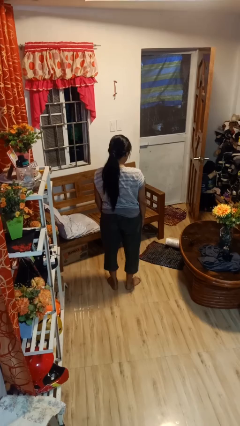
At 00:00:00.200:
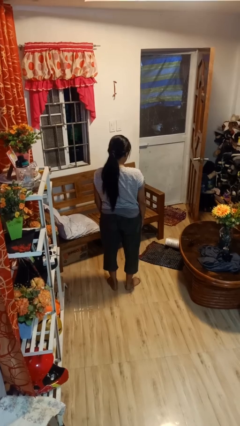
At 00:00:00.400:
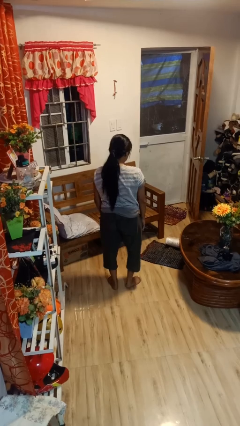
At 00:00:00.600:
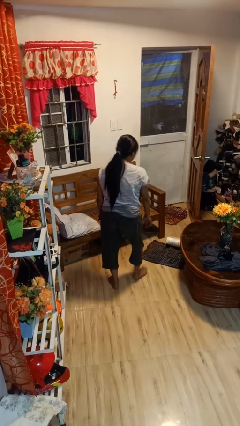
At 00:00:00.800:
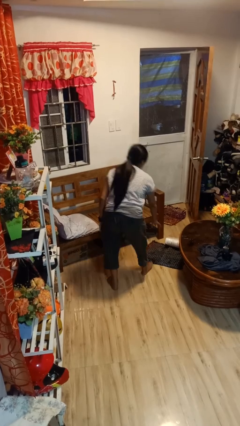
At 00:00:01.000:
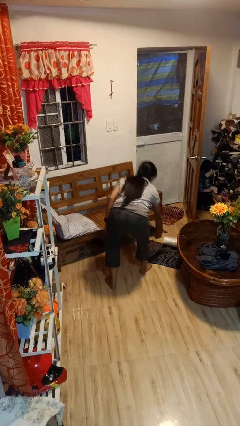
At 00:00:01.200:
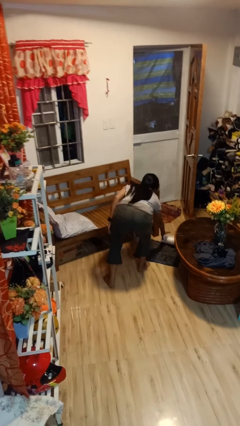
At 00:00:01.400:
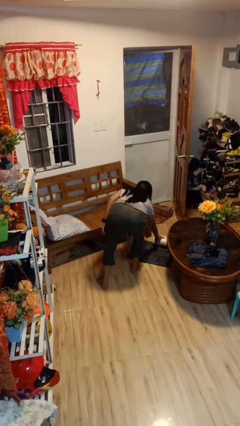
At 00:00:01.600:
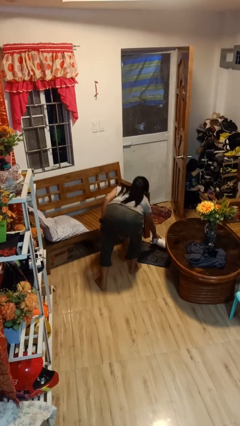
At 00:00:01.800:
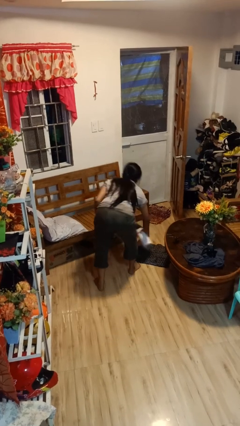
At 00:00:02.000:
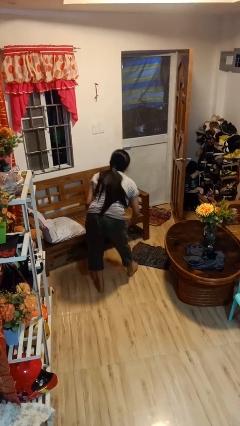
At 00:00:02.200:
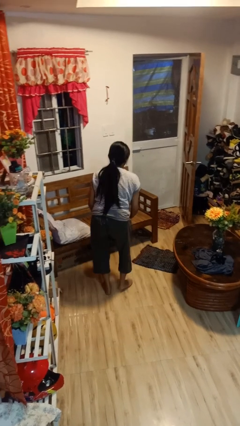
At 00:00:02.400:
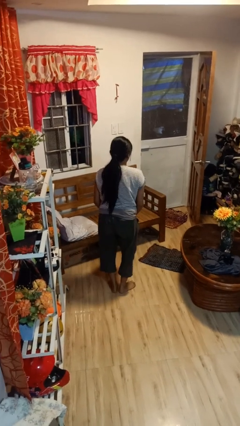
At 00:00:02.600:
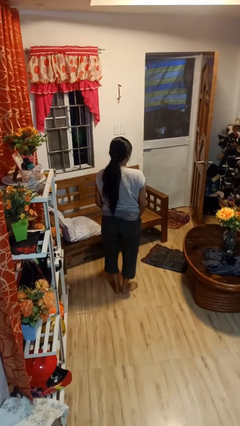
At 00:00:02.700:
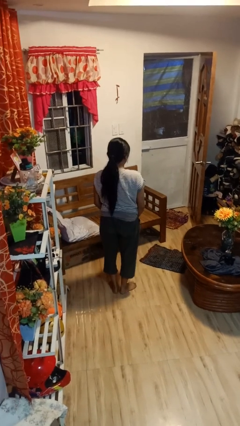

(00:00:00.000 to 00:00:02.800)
person picks up object from floor

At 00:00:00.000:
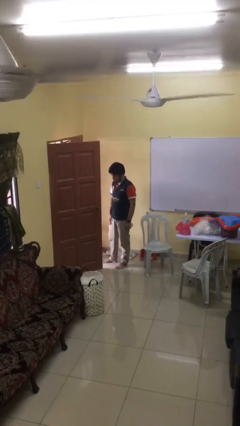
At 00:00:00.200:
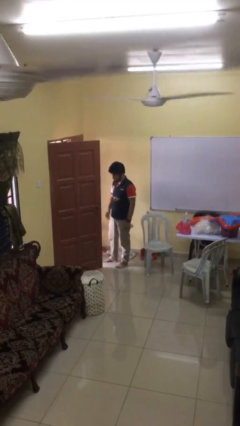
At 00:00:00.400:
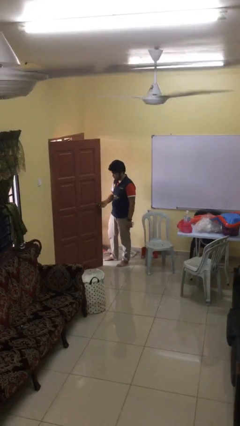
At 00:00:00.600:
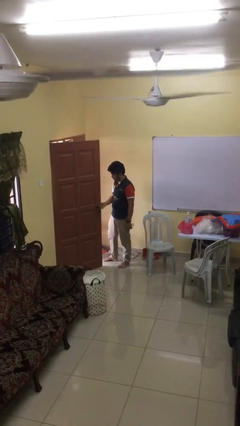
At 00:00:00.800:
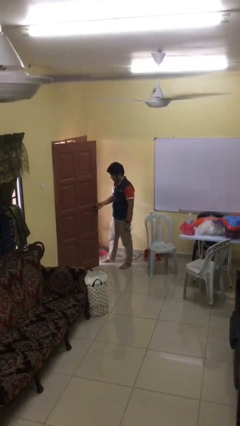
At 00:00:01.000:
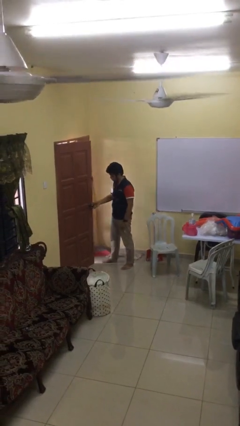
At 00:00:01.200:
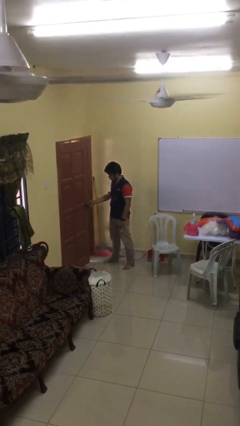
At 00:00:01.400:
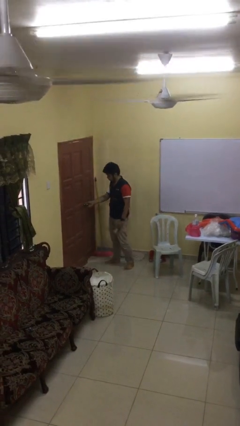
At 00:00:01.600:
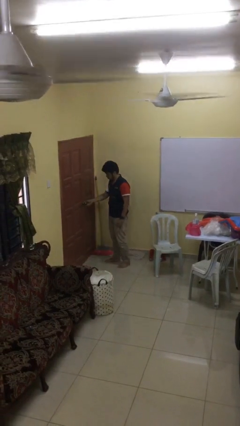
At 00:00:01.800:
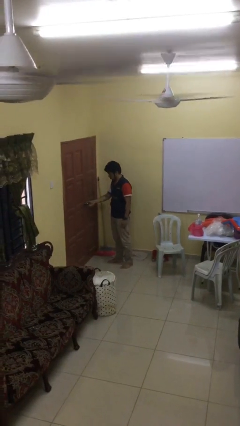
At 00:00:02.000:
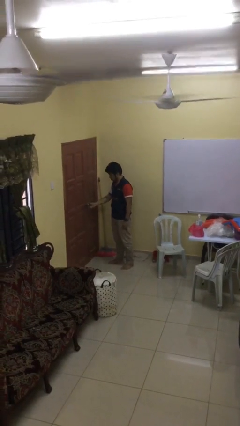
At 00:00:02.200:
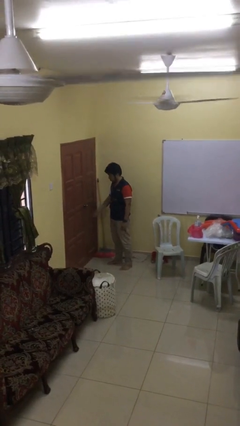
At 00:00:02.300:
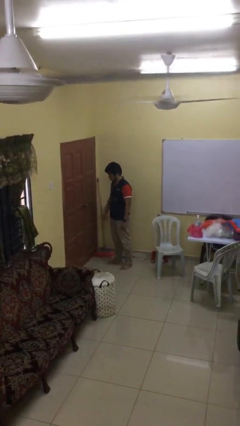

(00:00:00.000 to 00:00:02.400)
person closes facility door

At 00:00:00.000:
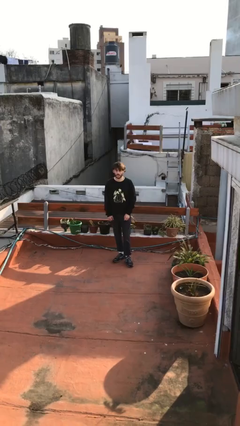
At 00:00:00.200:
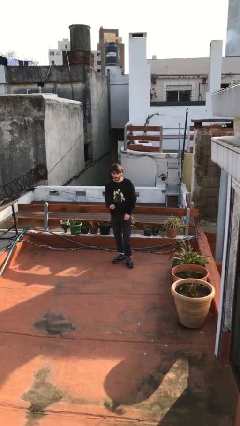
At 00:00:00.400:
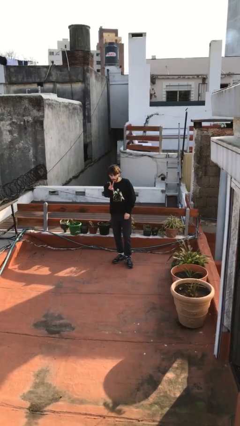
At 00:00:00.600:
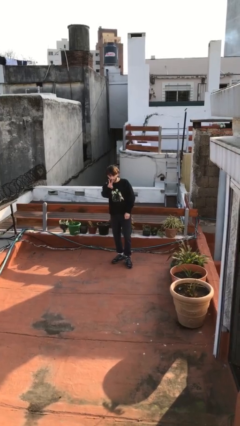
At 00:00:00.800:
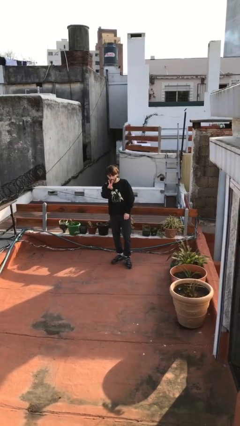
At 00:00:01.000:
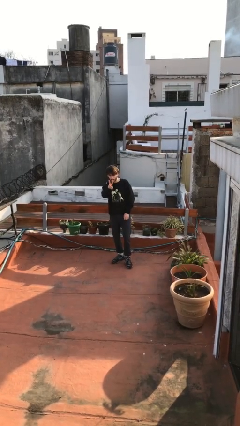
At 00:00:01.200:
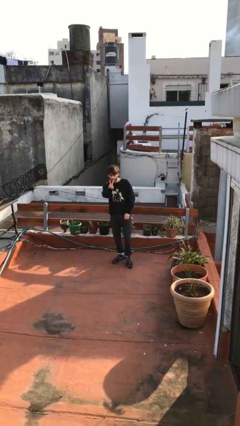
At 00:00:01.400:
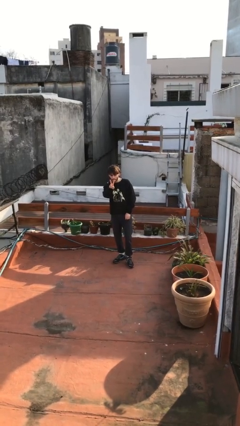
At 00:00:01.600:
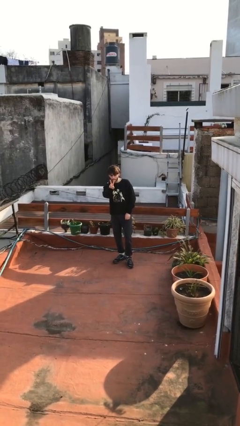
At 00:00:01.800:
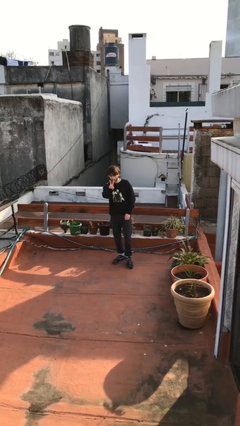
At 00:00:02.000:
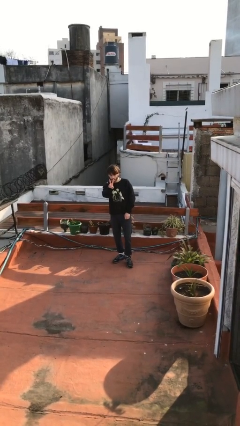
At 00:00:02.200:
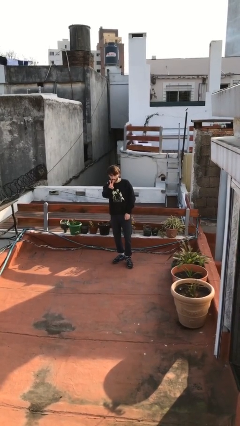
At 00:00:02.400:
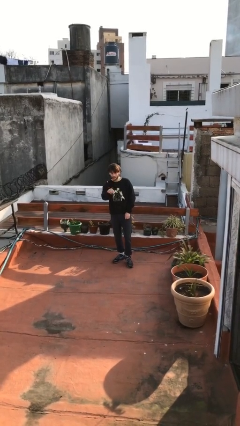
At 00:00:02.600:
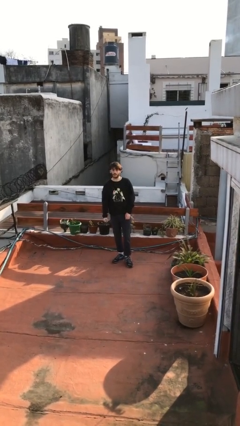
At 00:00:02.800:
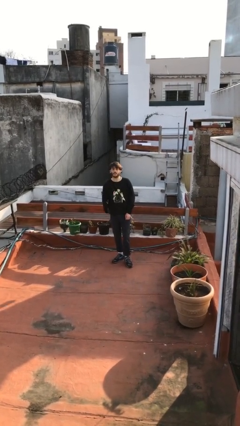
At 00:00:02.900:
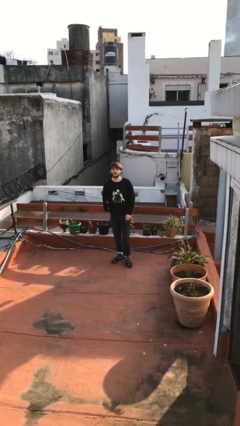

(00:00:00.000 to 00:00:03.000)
person gestures peace

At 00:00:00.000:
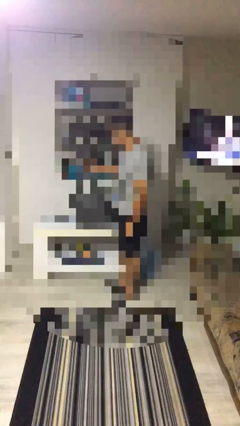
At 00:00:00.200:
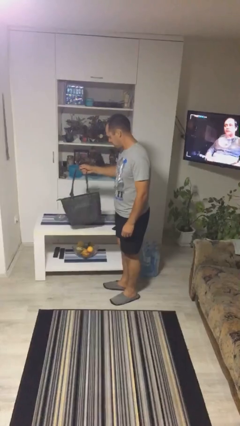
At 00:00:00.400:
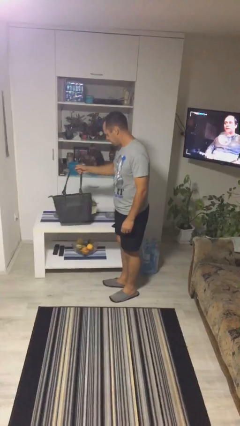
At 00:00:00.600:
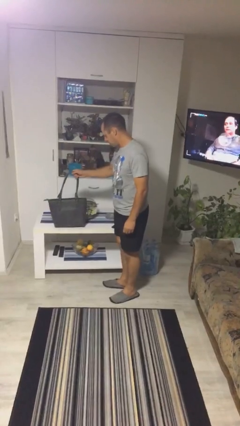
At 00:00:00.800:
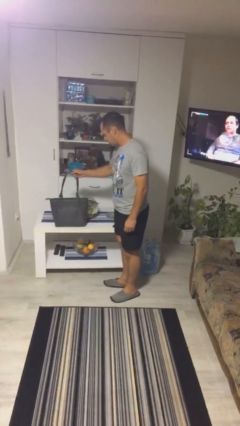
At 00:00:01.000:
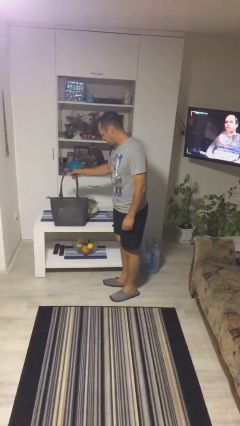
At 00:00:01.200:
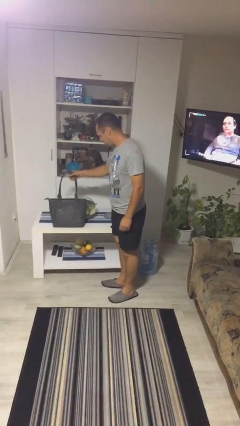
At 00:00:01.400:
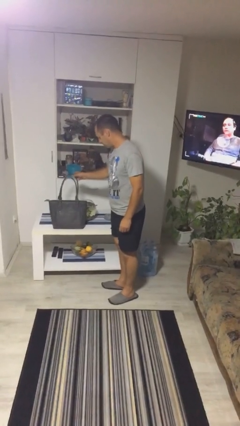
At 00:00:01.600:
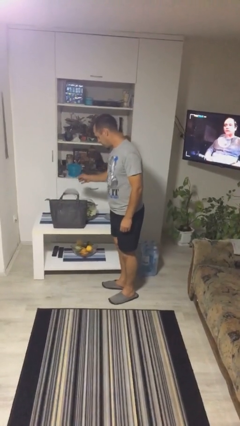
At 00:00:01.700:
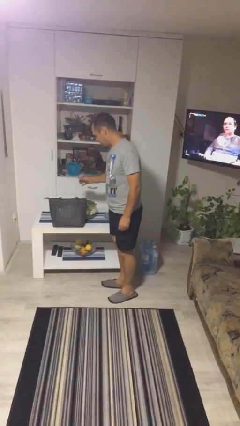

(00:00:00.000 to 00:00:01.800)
person puts down object on table

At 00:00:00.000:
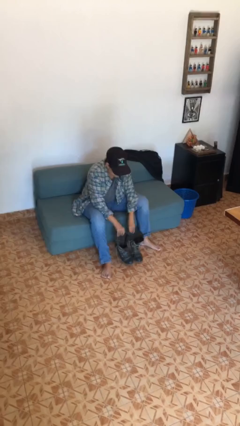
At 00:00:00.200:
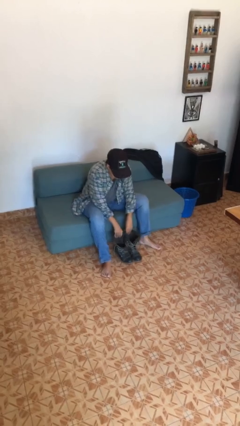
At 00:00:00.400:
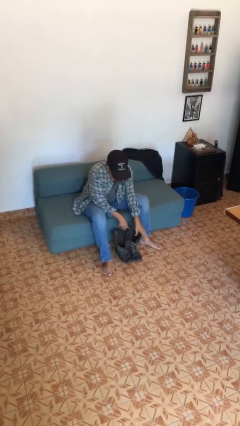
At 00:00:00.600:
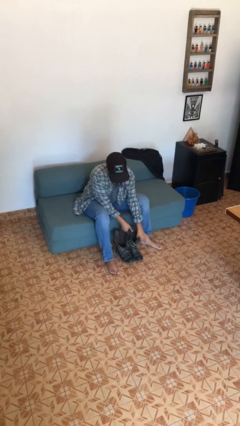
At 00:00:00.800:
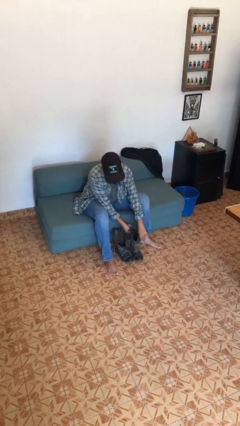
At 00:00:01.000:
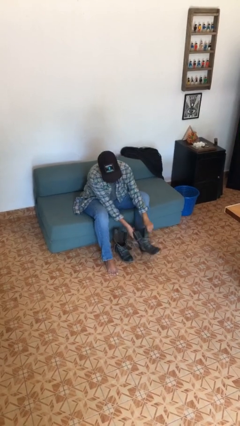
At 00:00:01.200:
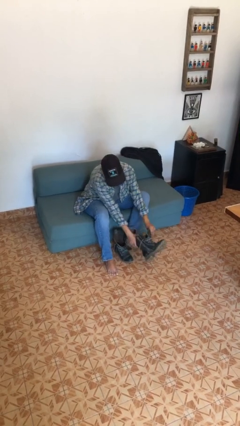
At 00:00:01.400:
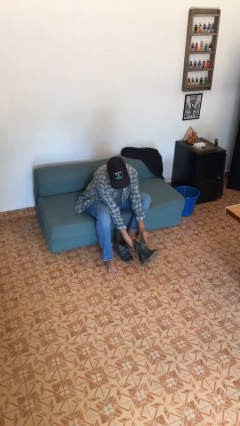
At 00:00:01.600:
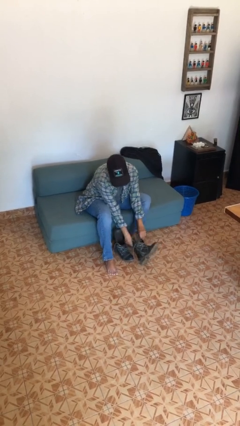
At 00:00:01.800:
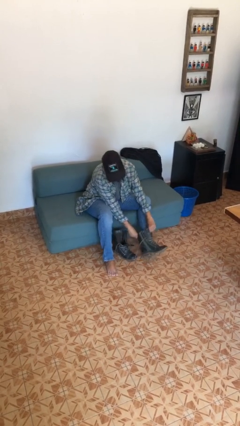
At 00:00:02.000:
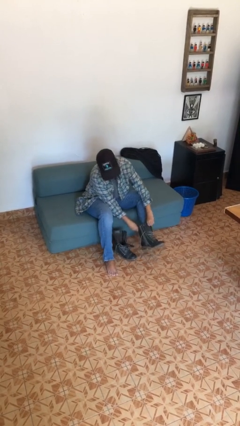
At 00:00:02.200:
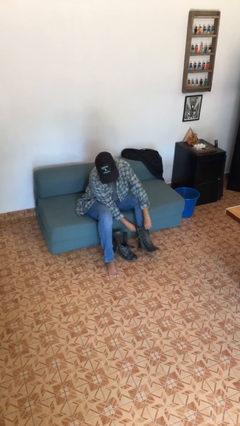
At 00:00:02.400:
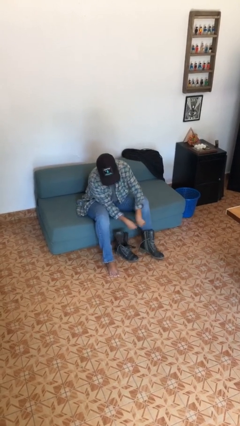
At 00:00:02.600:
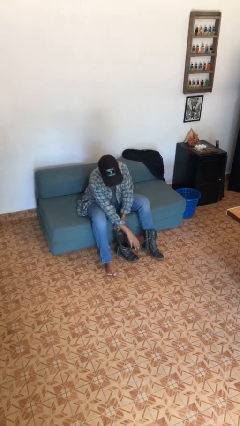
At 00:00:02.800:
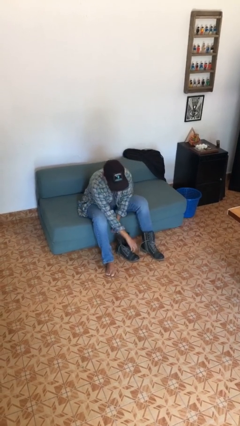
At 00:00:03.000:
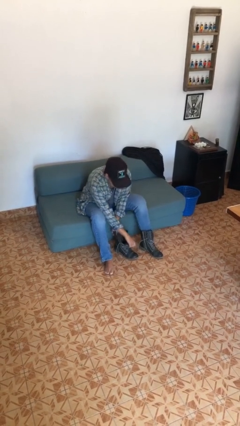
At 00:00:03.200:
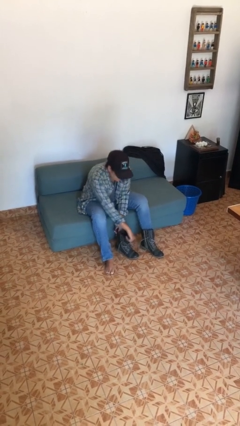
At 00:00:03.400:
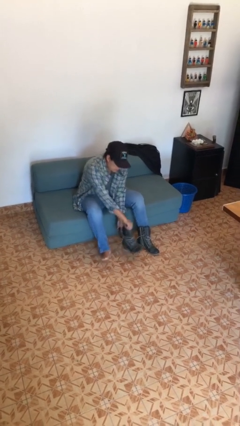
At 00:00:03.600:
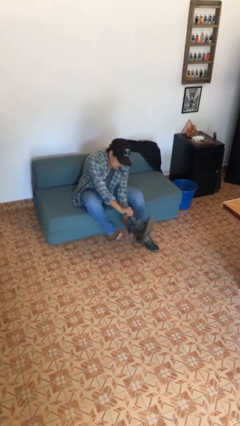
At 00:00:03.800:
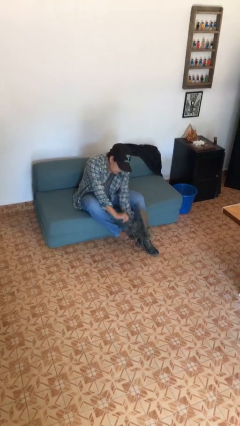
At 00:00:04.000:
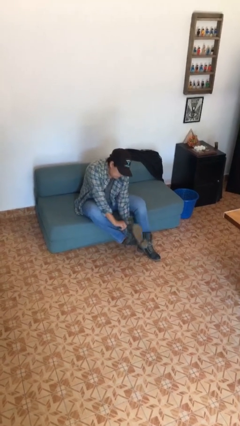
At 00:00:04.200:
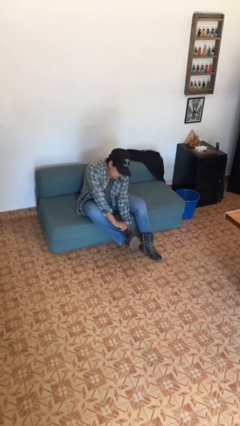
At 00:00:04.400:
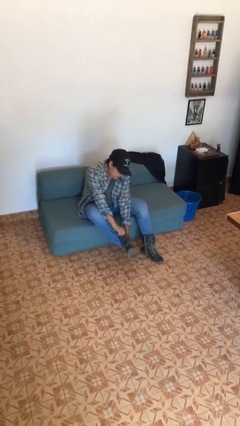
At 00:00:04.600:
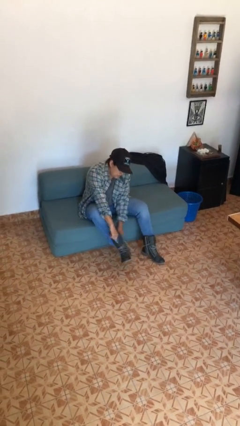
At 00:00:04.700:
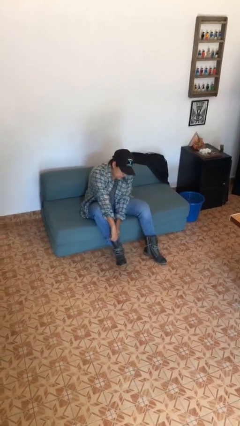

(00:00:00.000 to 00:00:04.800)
person puts on boots

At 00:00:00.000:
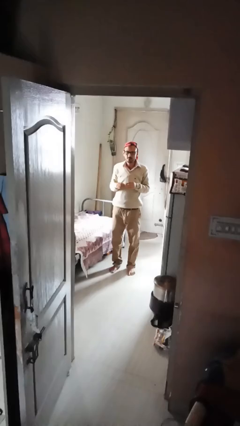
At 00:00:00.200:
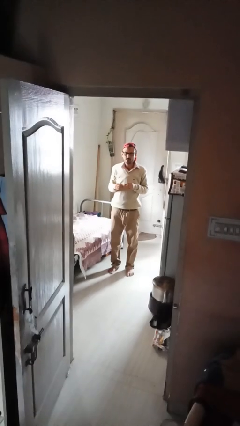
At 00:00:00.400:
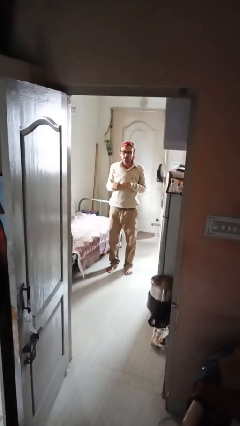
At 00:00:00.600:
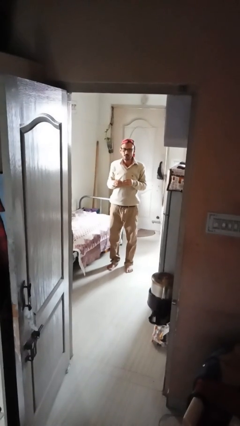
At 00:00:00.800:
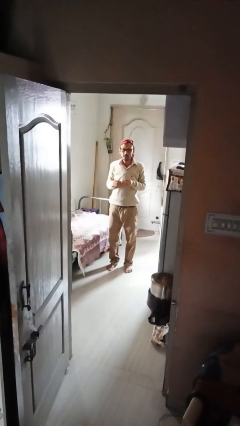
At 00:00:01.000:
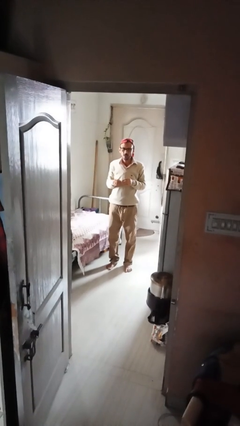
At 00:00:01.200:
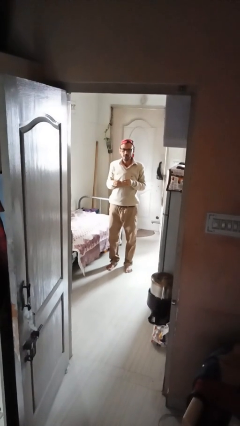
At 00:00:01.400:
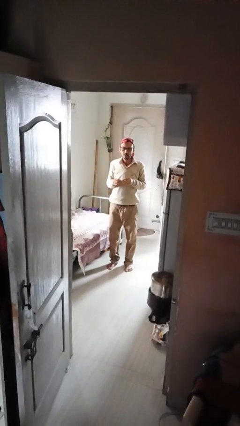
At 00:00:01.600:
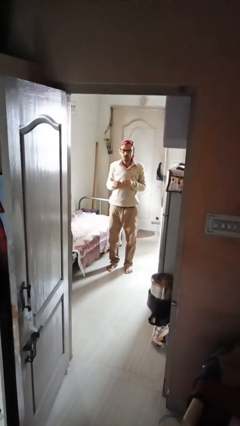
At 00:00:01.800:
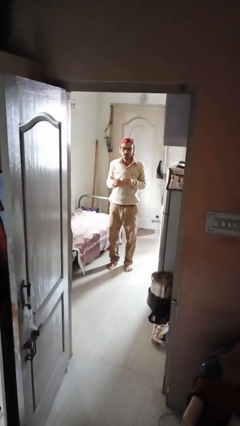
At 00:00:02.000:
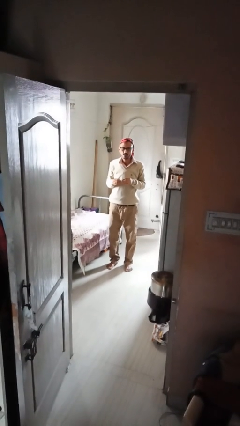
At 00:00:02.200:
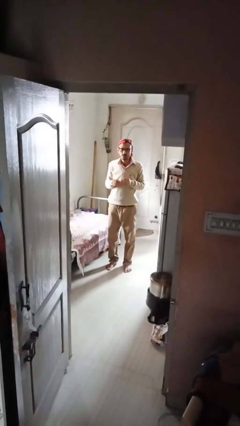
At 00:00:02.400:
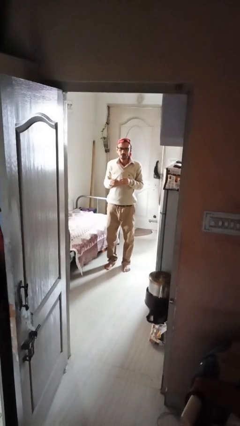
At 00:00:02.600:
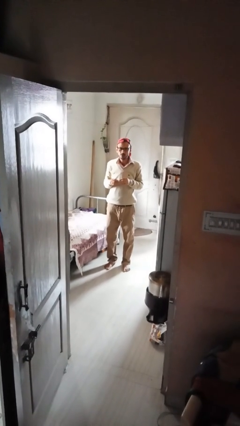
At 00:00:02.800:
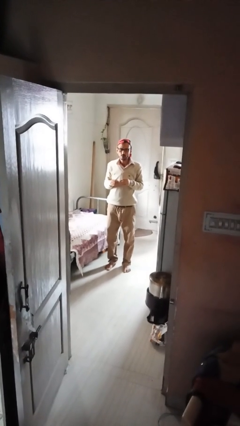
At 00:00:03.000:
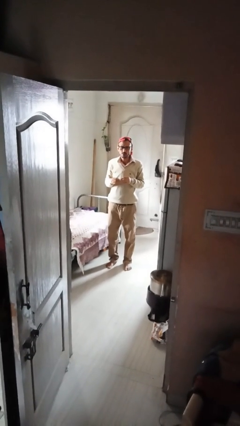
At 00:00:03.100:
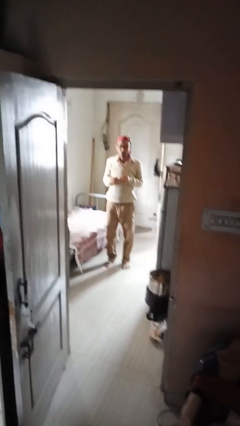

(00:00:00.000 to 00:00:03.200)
person puts on sunglasses
